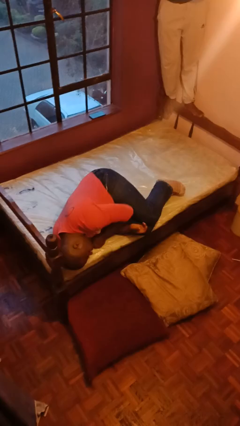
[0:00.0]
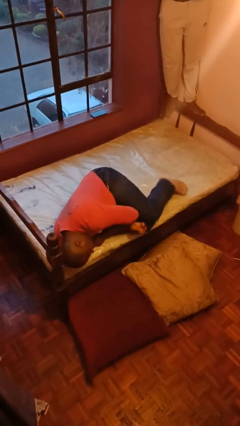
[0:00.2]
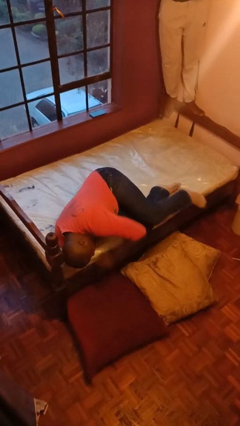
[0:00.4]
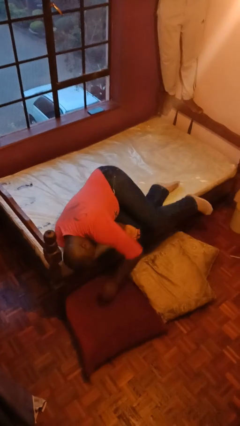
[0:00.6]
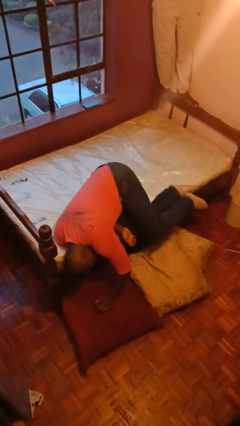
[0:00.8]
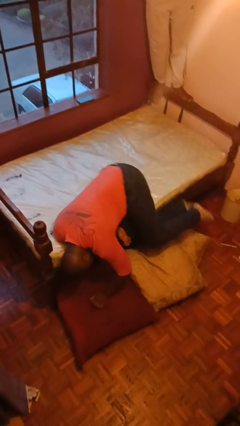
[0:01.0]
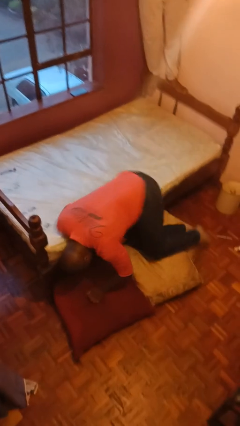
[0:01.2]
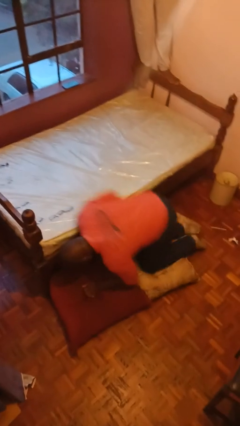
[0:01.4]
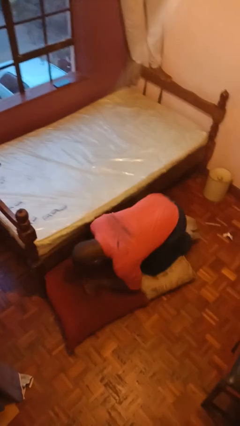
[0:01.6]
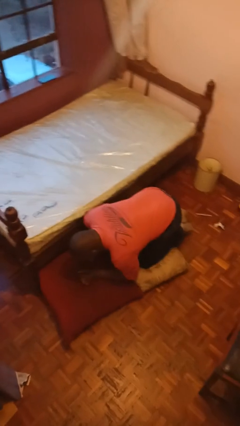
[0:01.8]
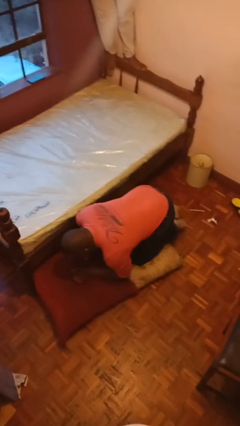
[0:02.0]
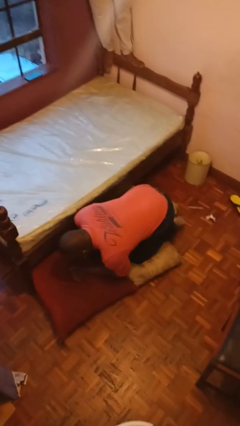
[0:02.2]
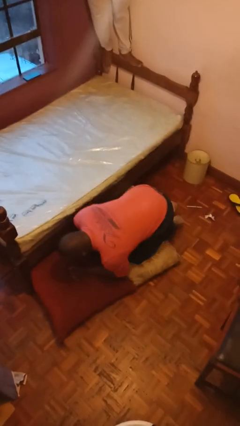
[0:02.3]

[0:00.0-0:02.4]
person falls from bed

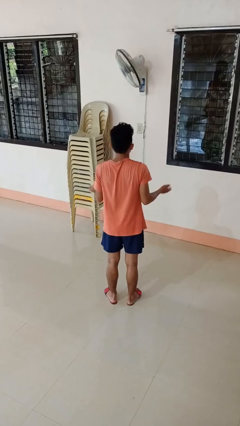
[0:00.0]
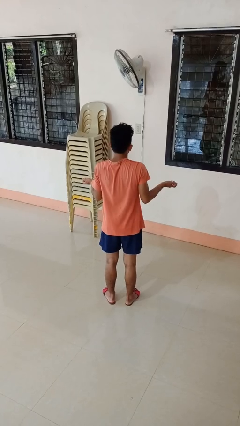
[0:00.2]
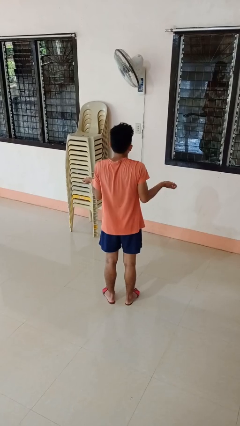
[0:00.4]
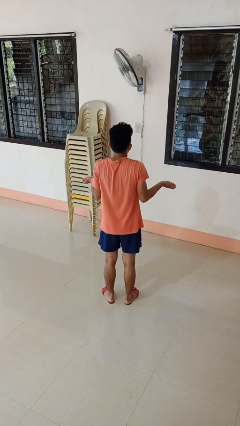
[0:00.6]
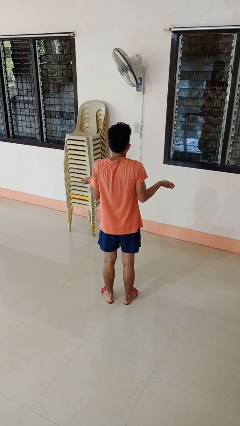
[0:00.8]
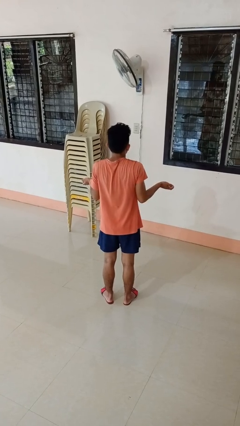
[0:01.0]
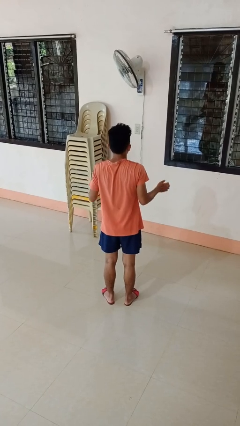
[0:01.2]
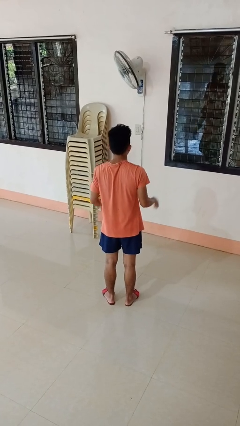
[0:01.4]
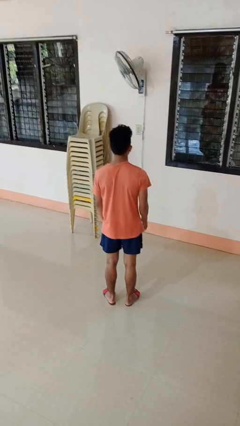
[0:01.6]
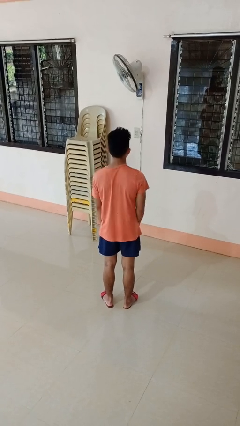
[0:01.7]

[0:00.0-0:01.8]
person shrugs

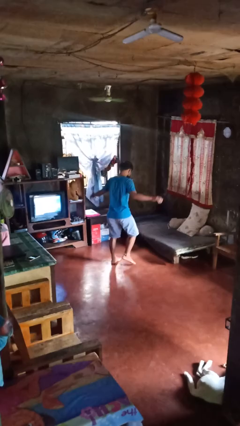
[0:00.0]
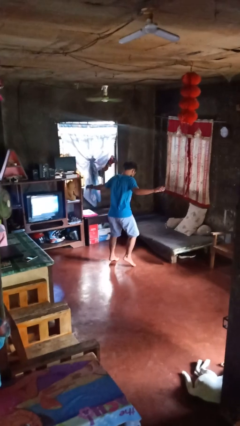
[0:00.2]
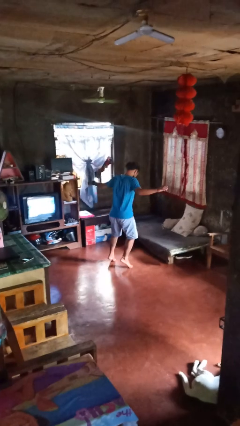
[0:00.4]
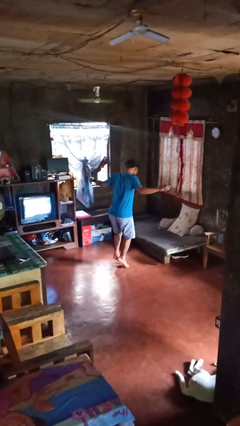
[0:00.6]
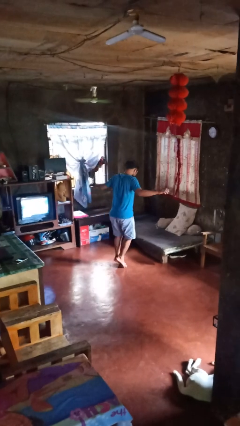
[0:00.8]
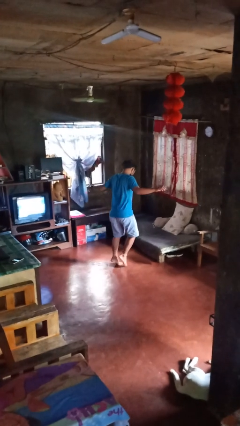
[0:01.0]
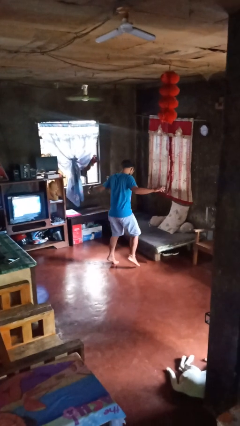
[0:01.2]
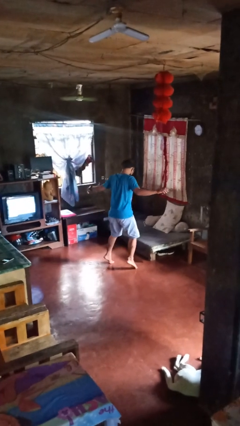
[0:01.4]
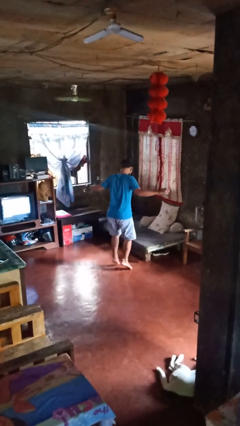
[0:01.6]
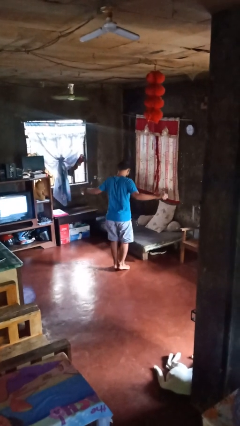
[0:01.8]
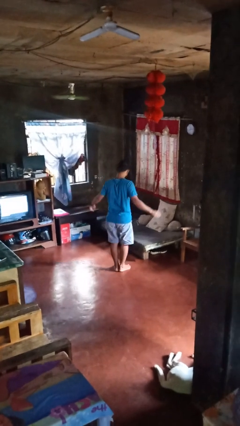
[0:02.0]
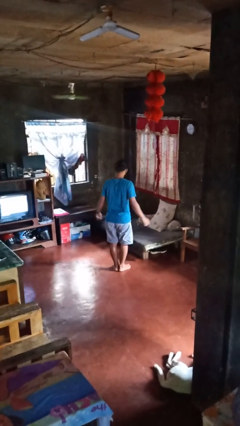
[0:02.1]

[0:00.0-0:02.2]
person walks tiptoe

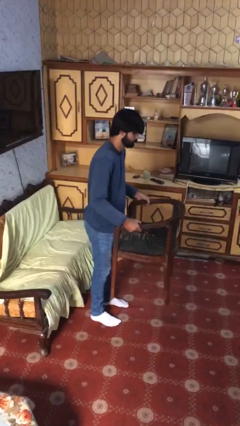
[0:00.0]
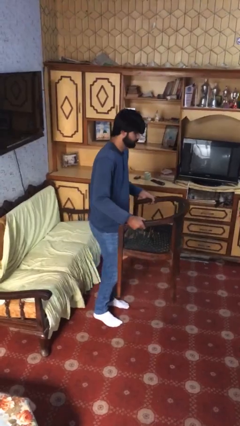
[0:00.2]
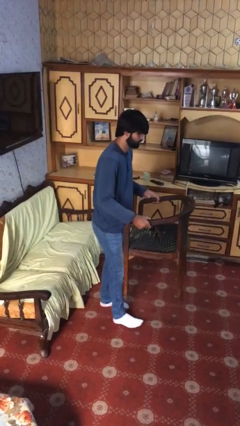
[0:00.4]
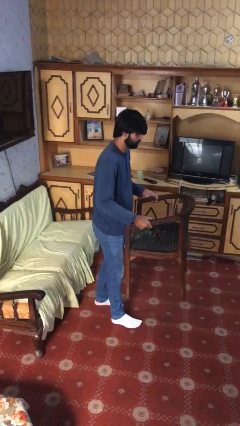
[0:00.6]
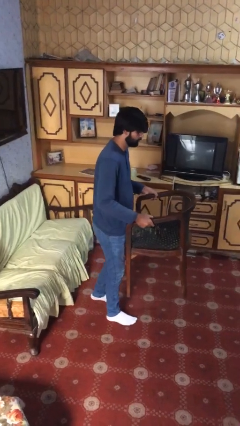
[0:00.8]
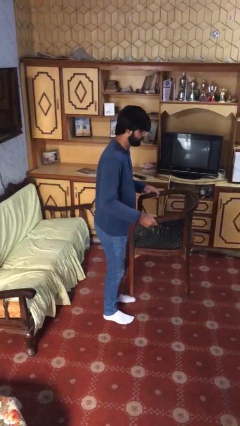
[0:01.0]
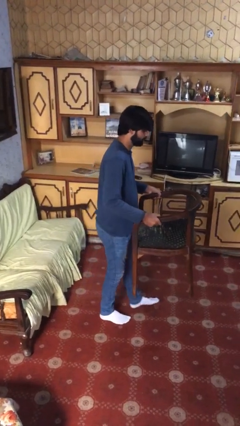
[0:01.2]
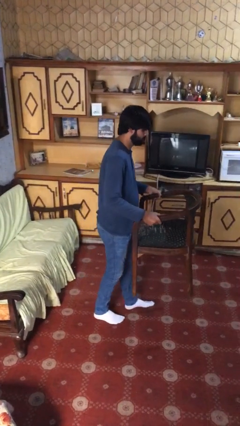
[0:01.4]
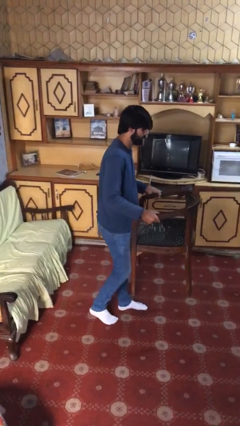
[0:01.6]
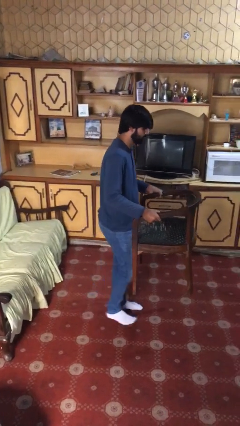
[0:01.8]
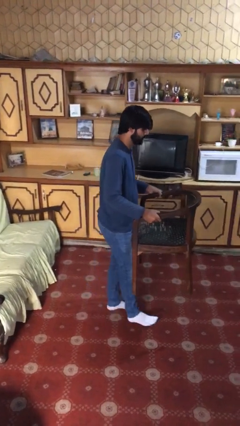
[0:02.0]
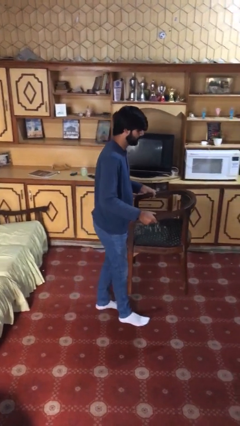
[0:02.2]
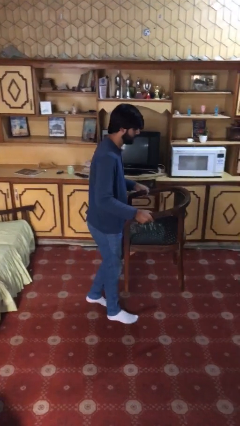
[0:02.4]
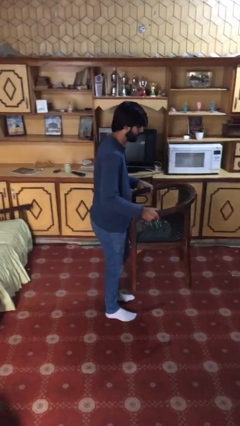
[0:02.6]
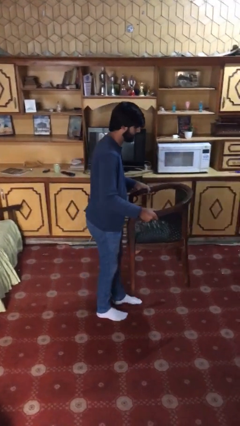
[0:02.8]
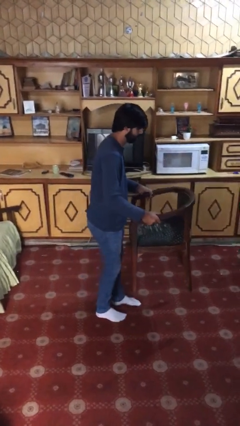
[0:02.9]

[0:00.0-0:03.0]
person carries heavy object

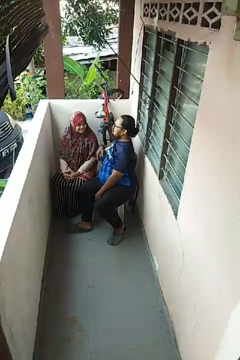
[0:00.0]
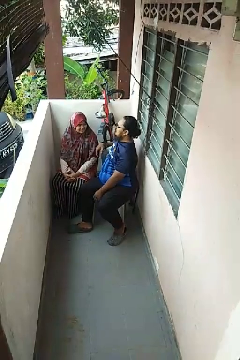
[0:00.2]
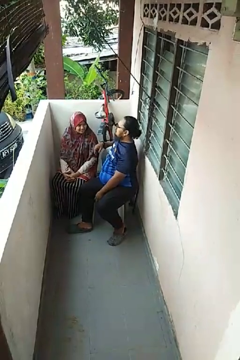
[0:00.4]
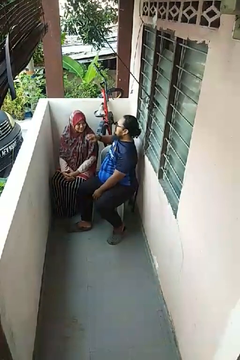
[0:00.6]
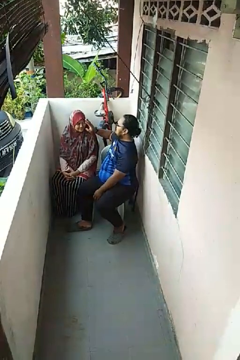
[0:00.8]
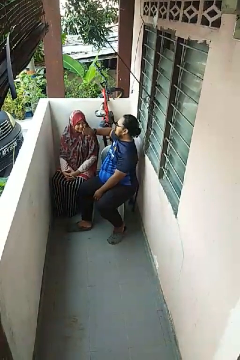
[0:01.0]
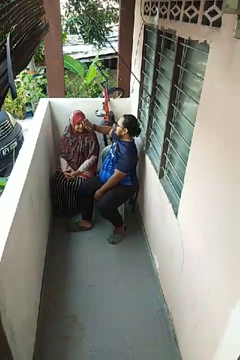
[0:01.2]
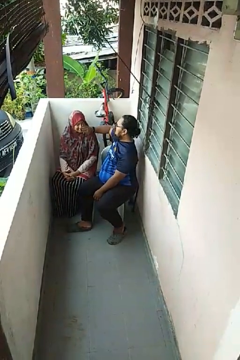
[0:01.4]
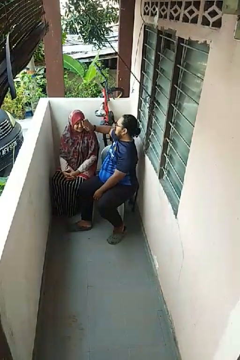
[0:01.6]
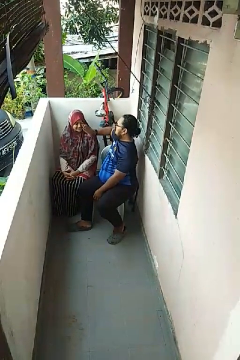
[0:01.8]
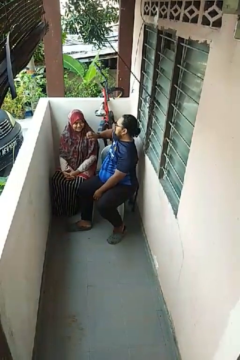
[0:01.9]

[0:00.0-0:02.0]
person touches face of person

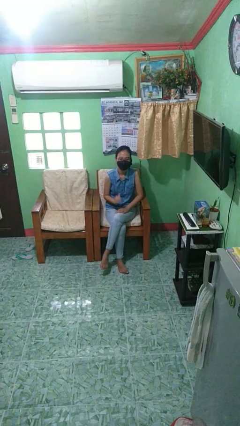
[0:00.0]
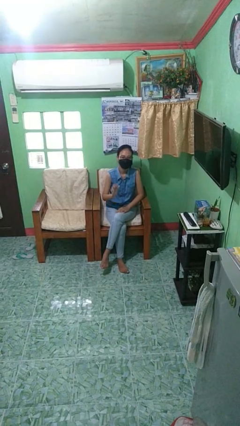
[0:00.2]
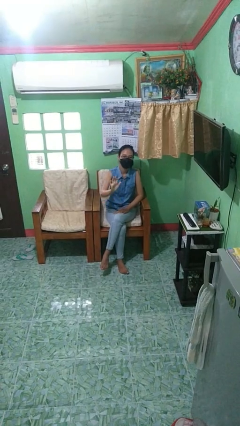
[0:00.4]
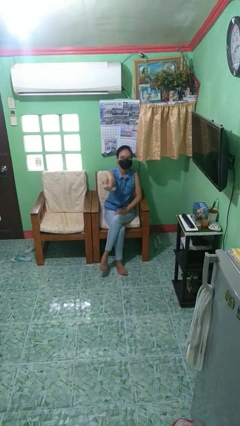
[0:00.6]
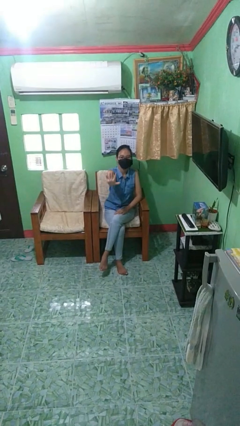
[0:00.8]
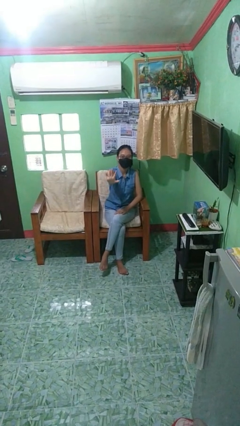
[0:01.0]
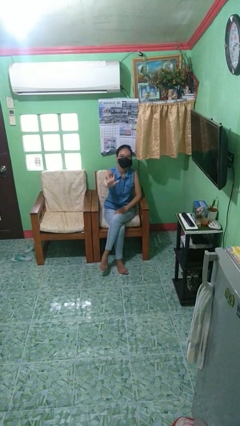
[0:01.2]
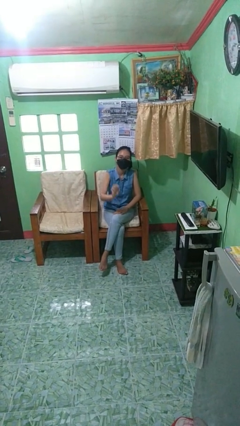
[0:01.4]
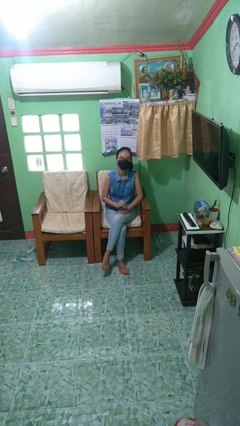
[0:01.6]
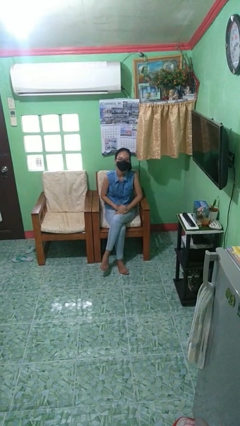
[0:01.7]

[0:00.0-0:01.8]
person gestures stop

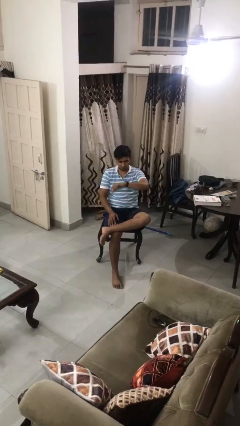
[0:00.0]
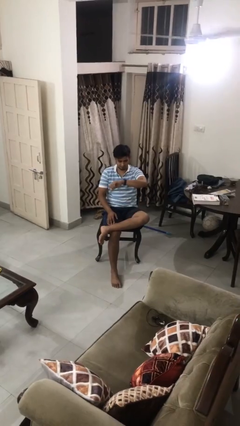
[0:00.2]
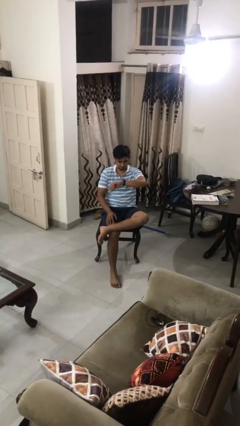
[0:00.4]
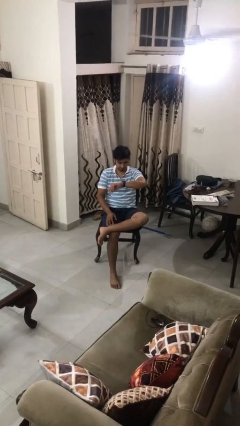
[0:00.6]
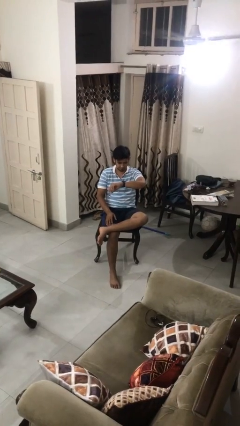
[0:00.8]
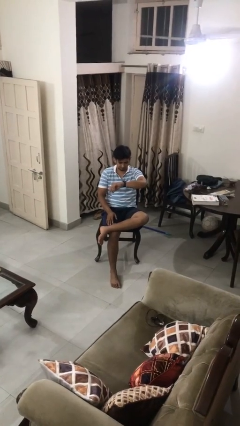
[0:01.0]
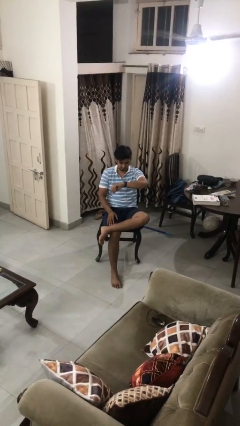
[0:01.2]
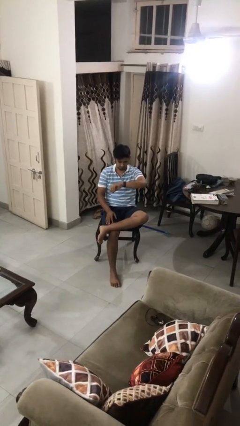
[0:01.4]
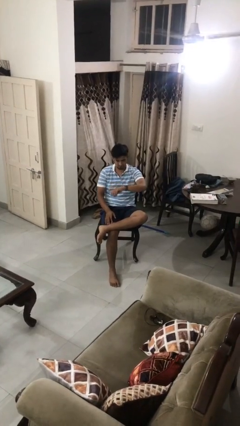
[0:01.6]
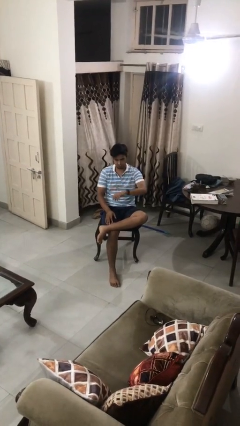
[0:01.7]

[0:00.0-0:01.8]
person looks at wristwatch

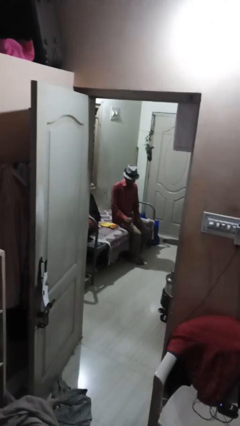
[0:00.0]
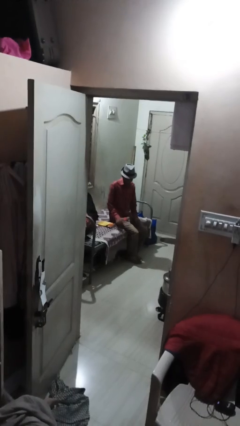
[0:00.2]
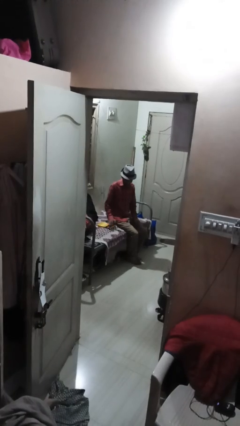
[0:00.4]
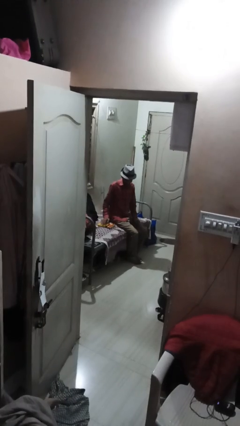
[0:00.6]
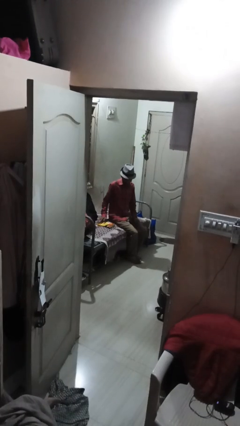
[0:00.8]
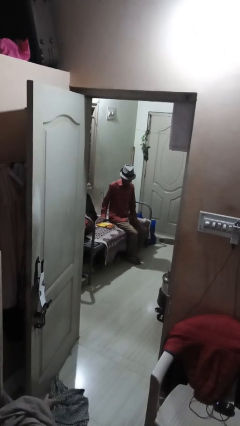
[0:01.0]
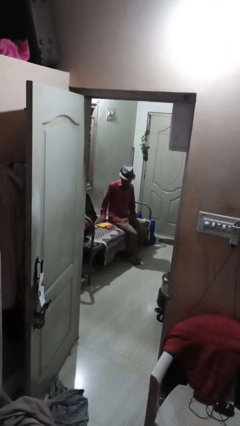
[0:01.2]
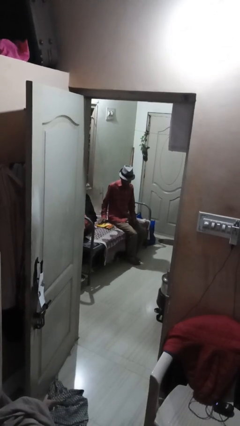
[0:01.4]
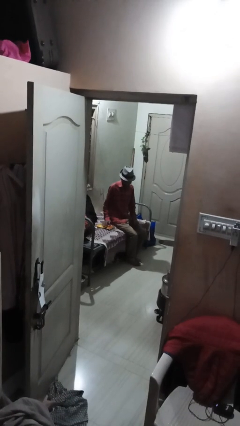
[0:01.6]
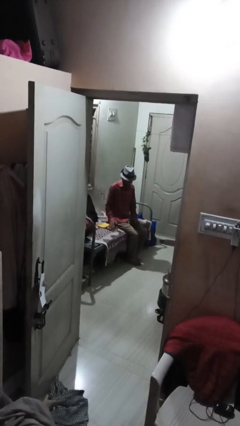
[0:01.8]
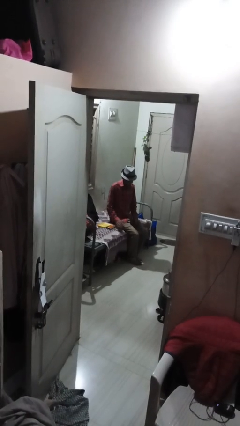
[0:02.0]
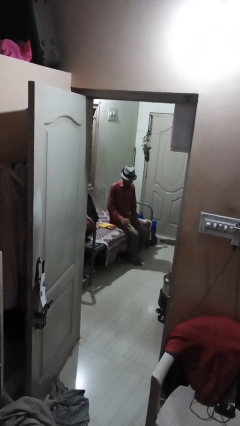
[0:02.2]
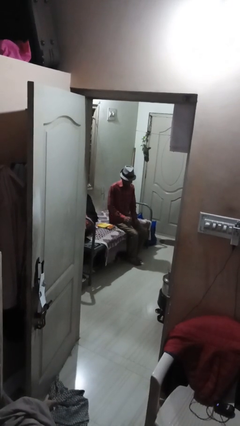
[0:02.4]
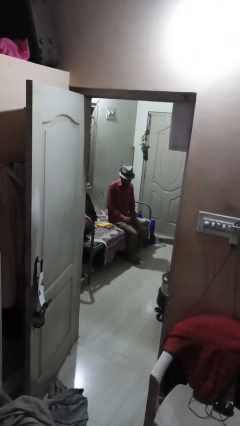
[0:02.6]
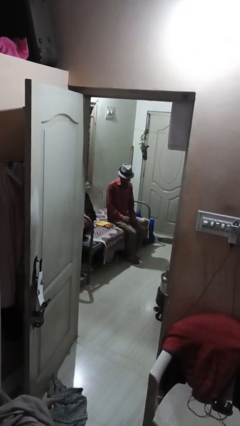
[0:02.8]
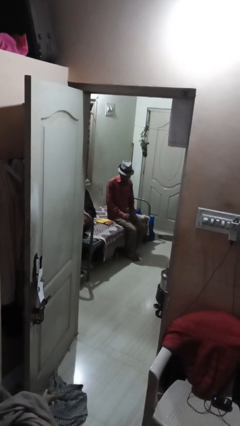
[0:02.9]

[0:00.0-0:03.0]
person waves hand over object
